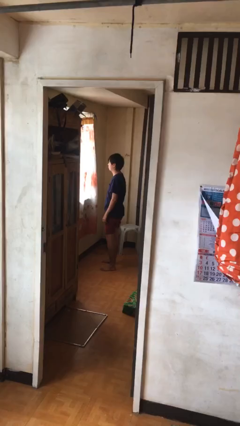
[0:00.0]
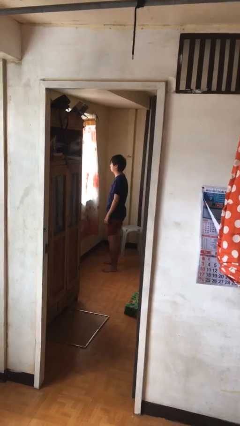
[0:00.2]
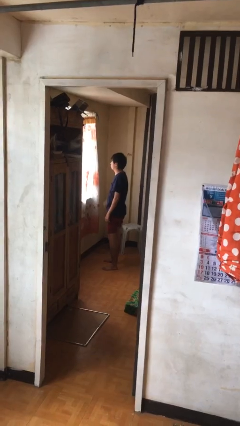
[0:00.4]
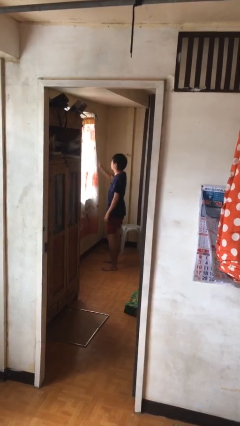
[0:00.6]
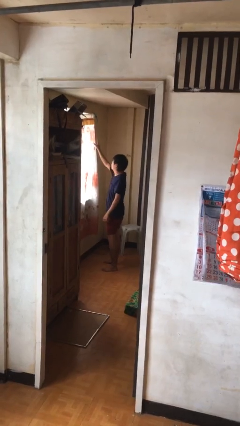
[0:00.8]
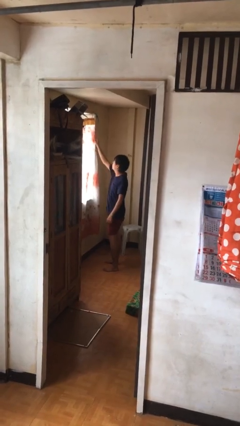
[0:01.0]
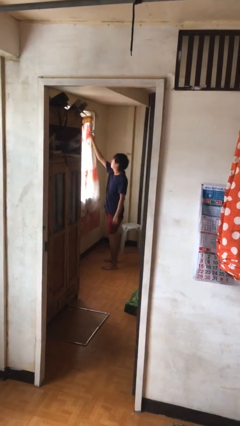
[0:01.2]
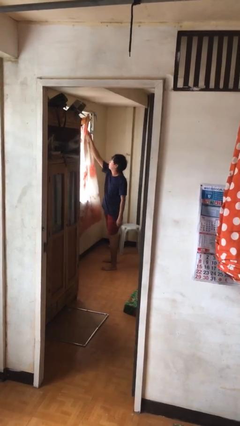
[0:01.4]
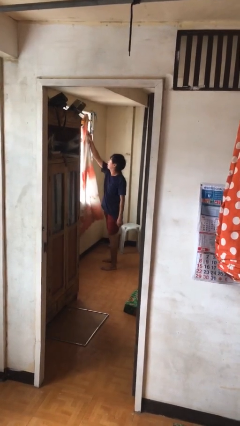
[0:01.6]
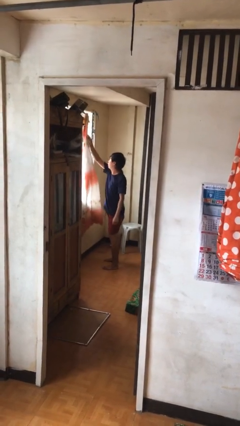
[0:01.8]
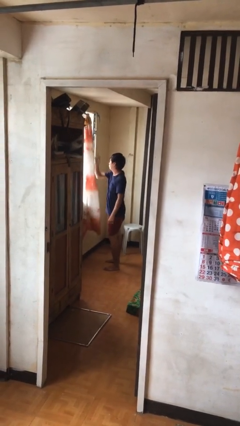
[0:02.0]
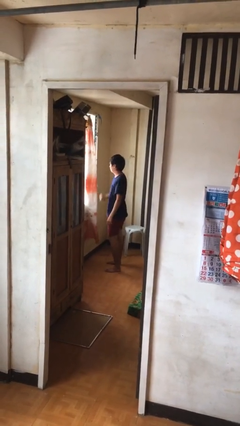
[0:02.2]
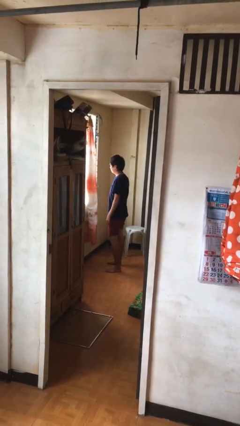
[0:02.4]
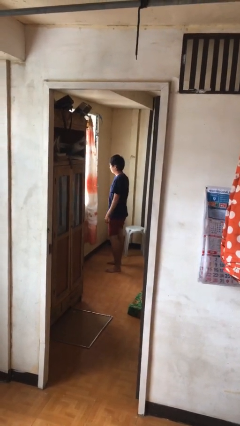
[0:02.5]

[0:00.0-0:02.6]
person opens curtains

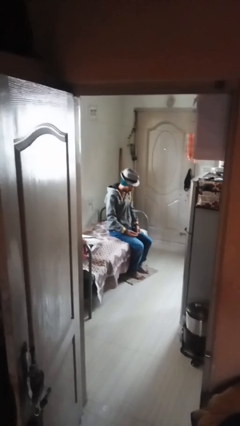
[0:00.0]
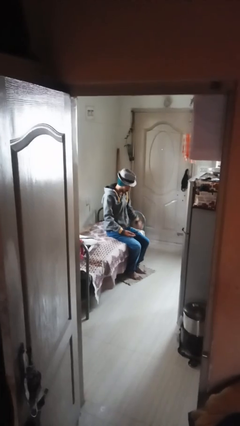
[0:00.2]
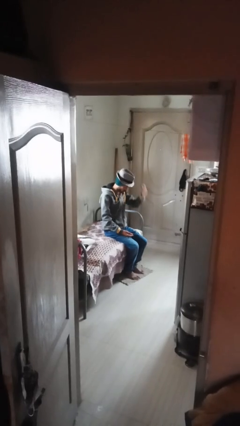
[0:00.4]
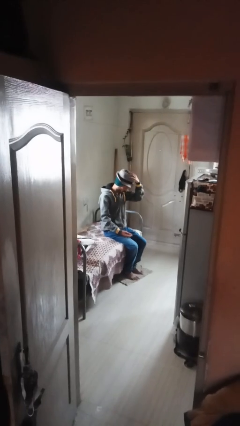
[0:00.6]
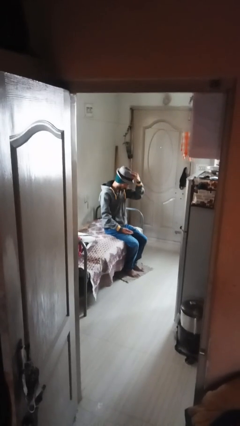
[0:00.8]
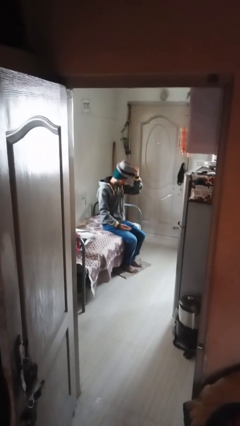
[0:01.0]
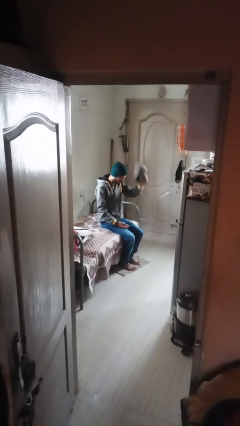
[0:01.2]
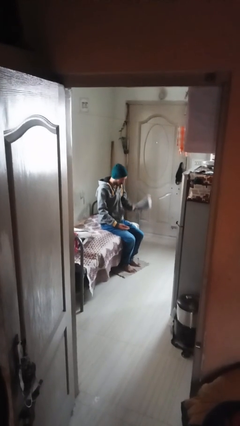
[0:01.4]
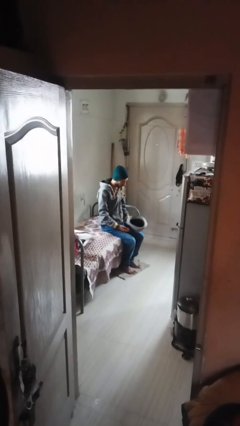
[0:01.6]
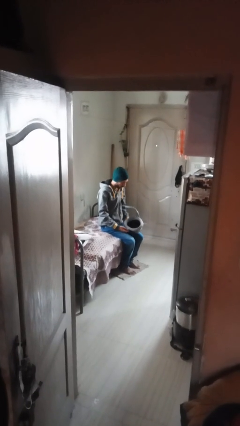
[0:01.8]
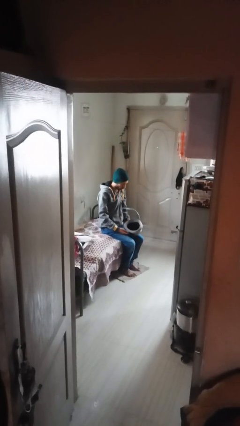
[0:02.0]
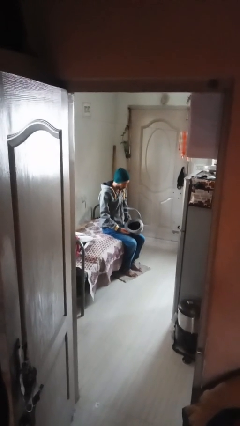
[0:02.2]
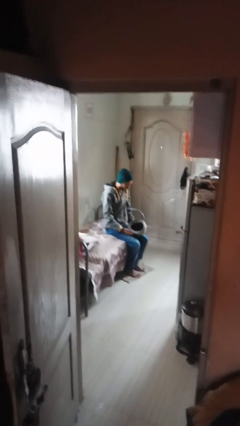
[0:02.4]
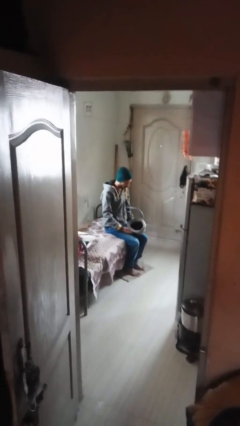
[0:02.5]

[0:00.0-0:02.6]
person takes off hat

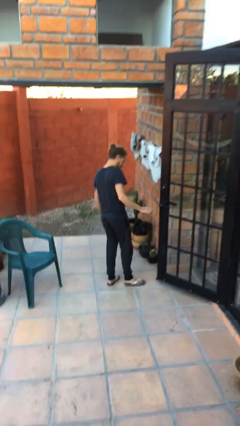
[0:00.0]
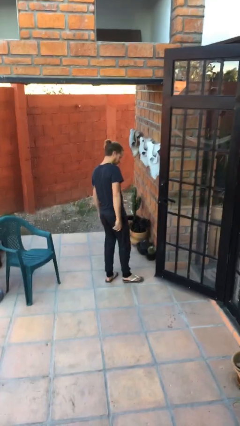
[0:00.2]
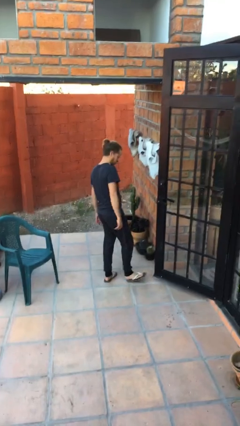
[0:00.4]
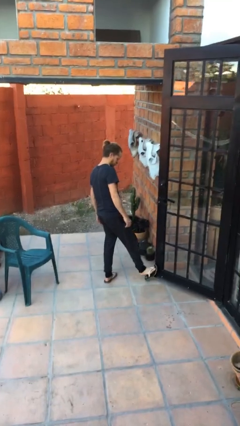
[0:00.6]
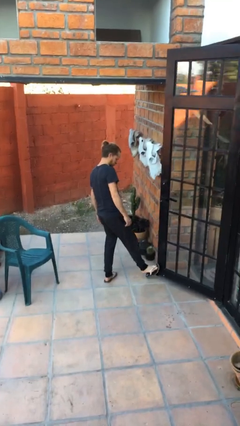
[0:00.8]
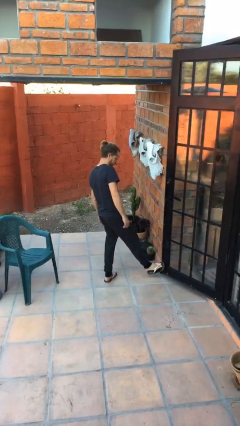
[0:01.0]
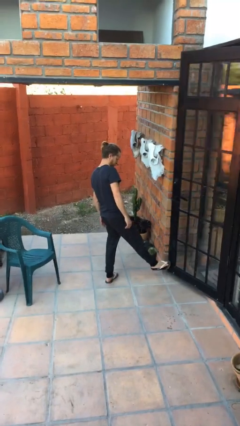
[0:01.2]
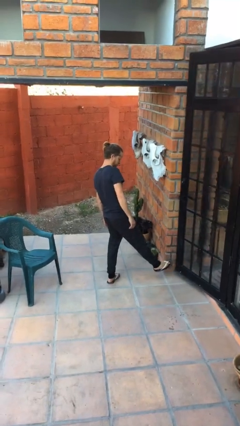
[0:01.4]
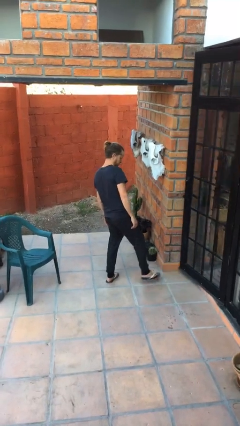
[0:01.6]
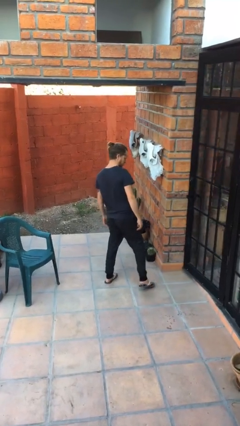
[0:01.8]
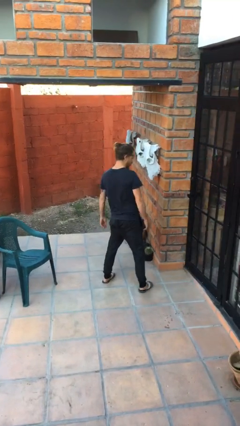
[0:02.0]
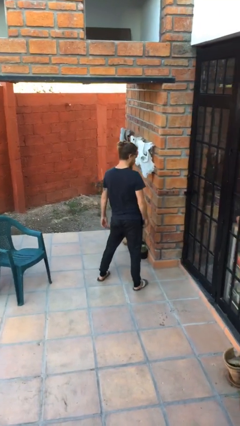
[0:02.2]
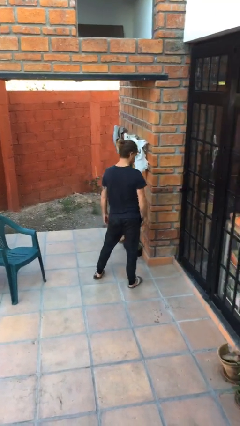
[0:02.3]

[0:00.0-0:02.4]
person closes door with foot

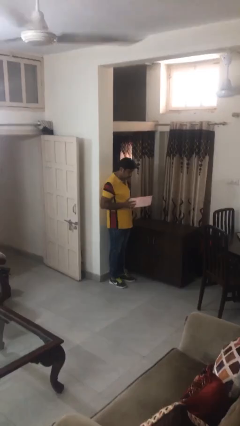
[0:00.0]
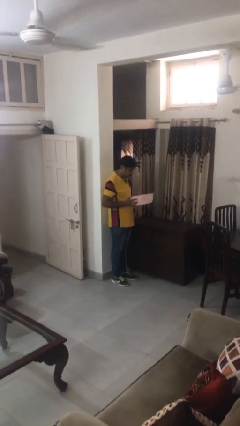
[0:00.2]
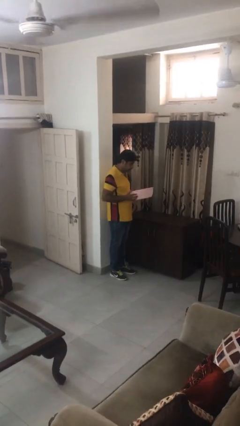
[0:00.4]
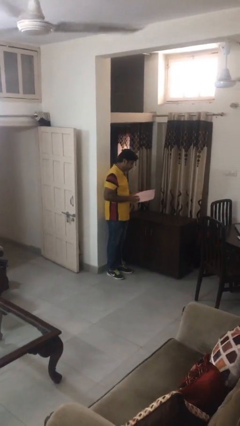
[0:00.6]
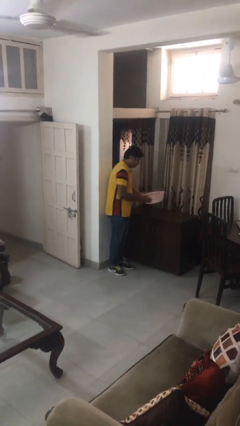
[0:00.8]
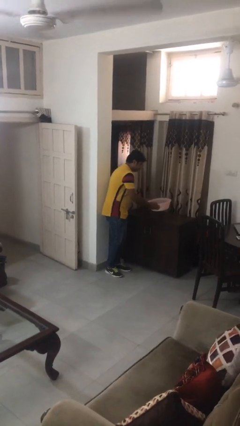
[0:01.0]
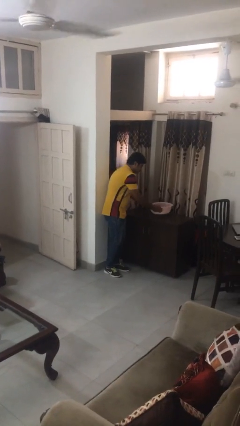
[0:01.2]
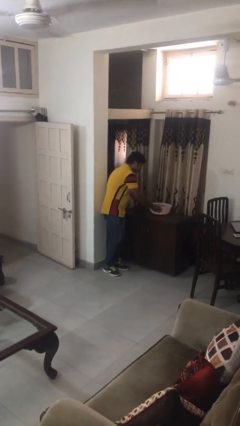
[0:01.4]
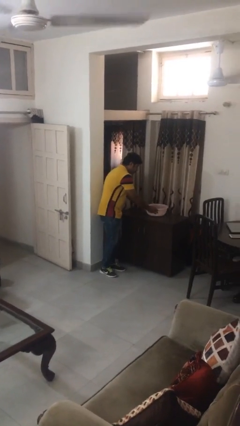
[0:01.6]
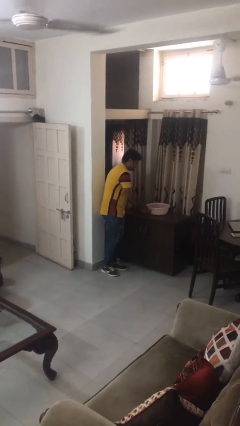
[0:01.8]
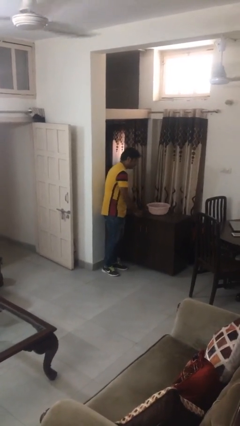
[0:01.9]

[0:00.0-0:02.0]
person puts down object on countertop

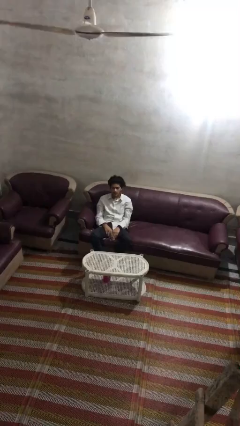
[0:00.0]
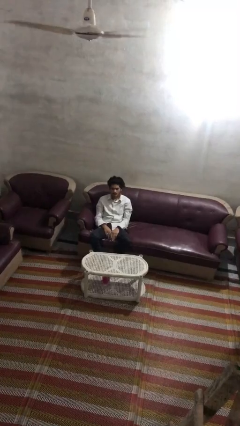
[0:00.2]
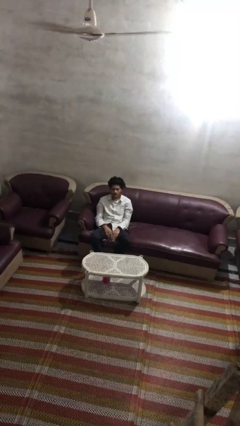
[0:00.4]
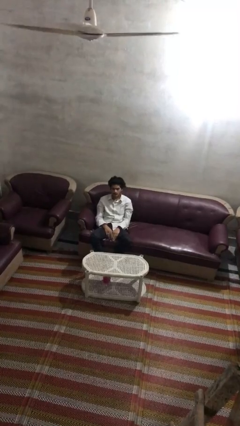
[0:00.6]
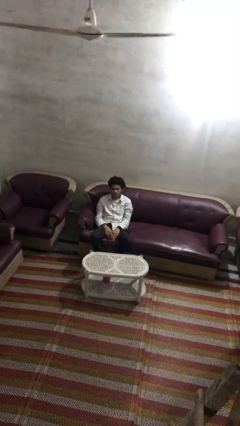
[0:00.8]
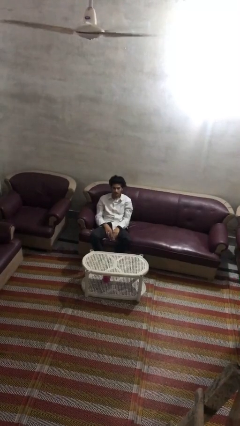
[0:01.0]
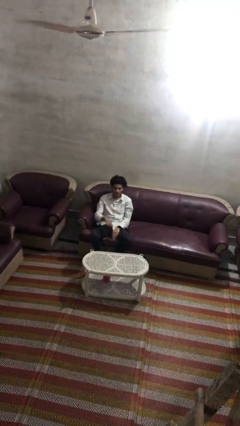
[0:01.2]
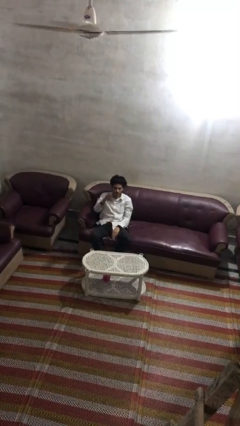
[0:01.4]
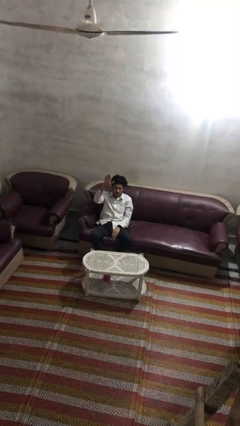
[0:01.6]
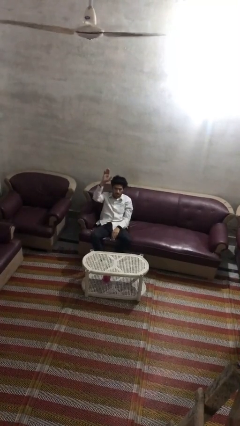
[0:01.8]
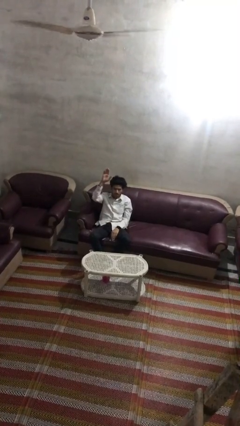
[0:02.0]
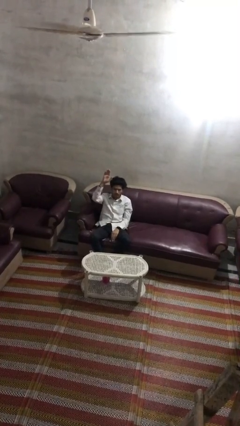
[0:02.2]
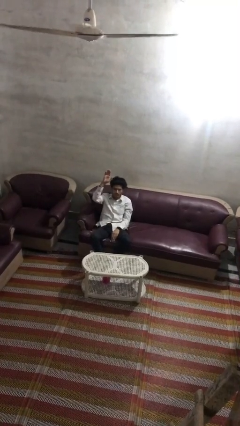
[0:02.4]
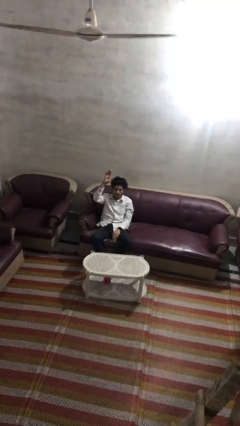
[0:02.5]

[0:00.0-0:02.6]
person gestures raise hand

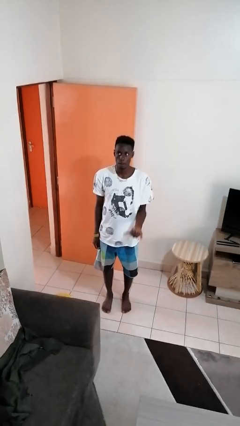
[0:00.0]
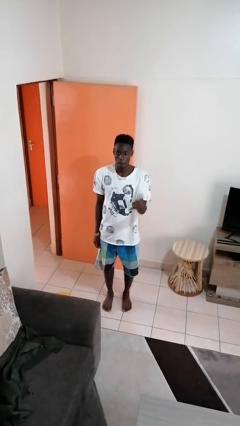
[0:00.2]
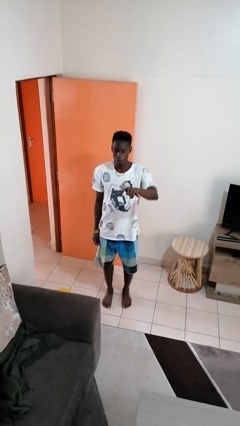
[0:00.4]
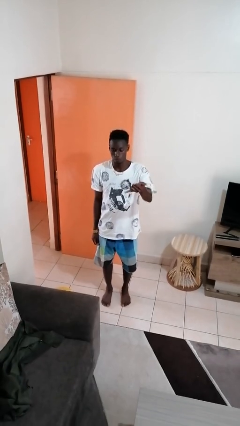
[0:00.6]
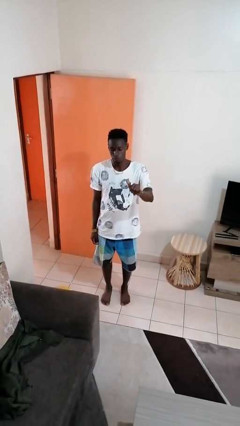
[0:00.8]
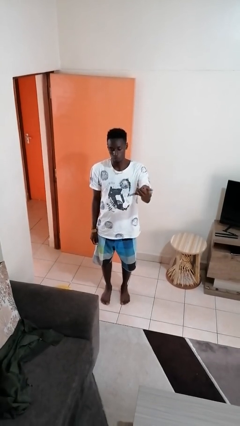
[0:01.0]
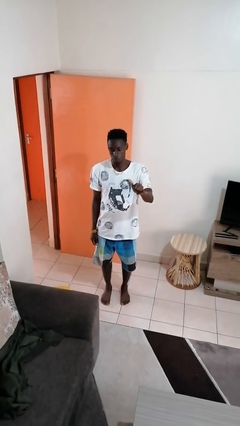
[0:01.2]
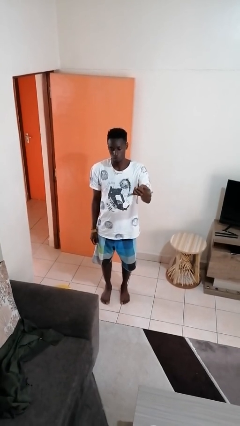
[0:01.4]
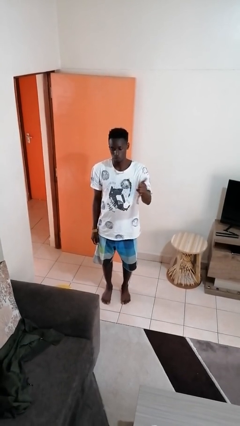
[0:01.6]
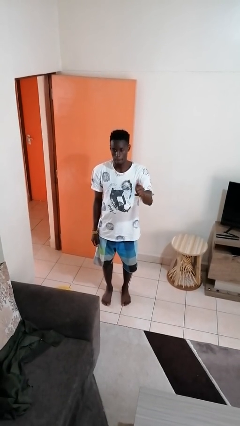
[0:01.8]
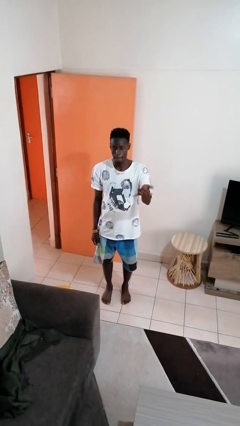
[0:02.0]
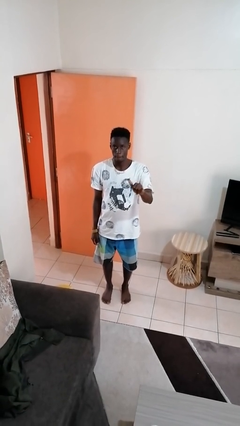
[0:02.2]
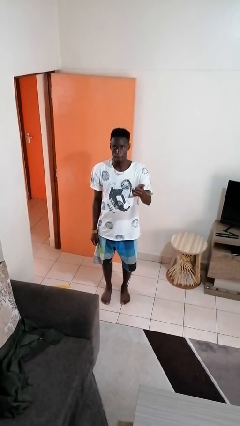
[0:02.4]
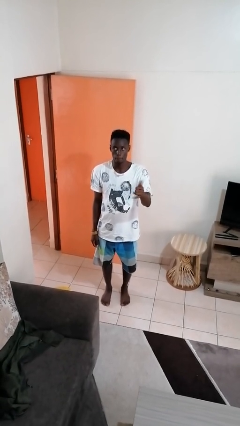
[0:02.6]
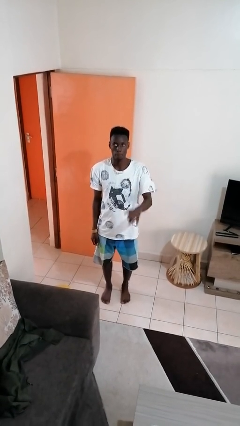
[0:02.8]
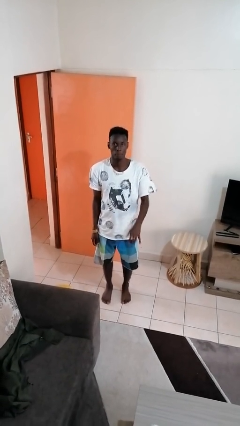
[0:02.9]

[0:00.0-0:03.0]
person gestures hang loose

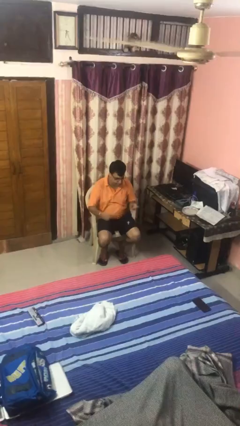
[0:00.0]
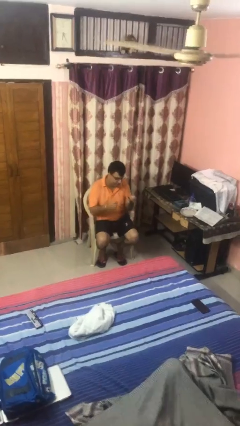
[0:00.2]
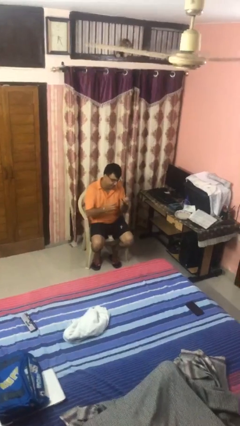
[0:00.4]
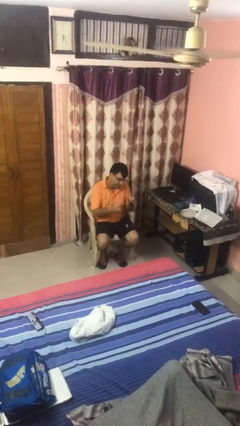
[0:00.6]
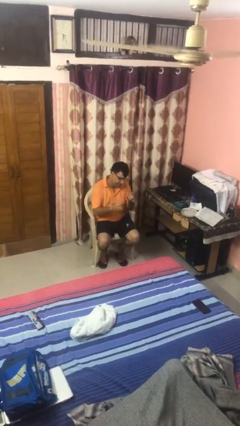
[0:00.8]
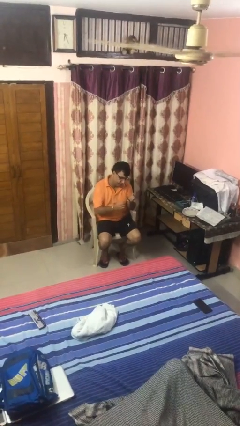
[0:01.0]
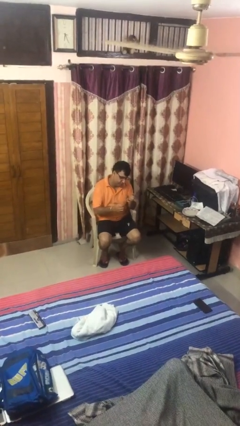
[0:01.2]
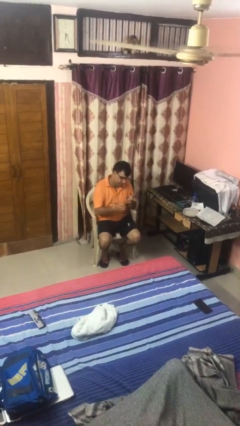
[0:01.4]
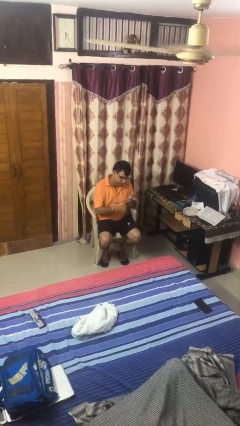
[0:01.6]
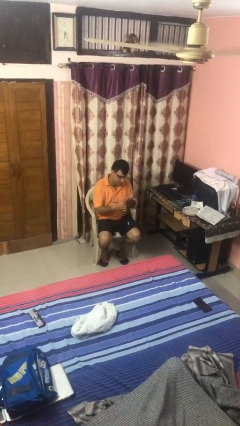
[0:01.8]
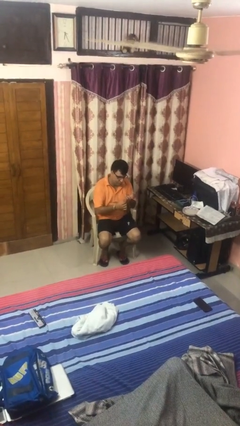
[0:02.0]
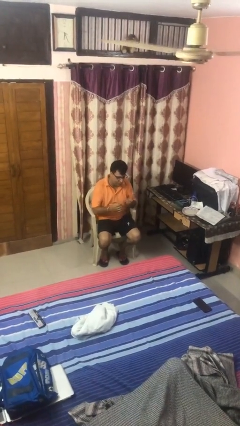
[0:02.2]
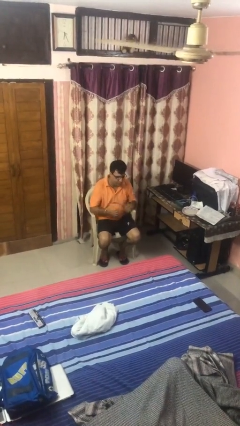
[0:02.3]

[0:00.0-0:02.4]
person files fingernails
